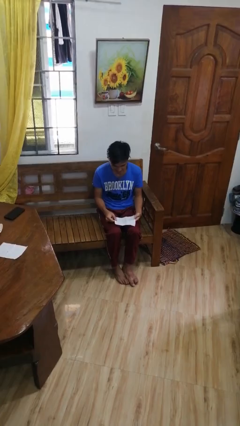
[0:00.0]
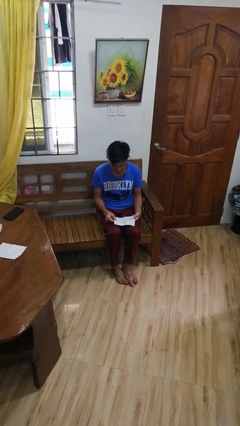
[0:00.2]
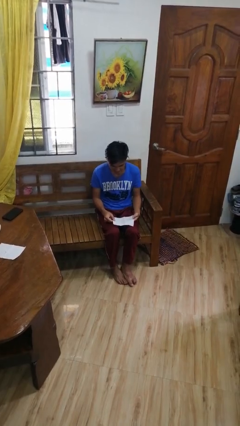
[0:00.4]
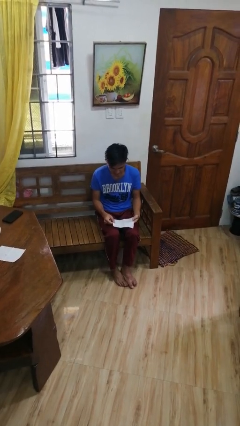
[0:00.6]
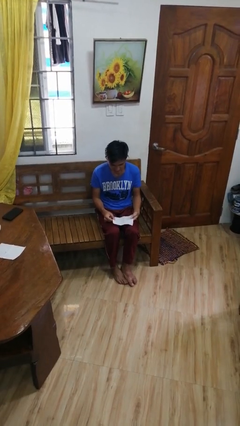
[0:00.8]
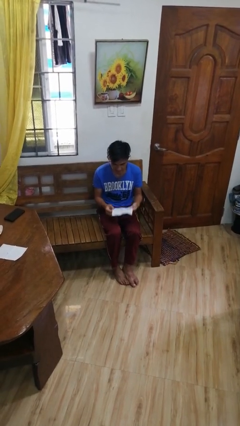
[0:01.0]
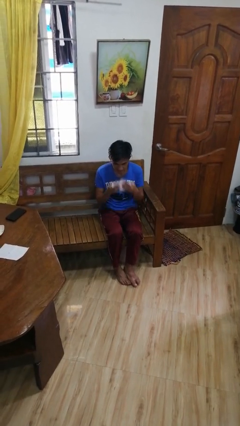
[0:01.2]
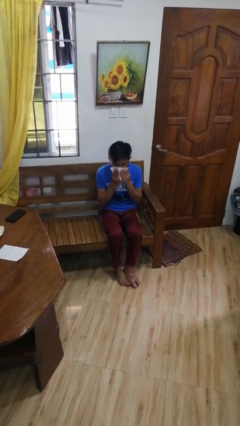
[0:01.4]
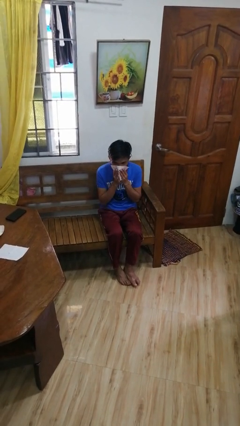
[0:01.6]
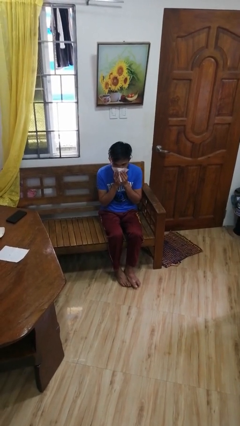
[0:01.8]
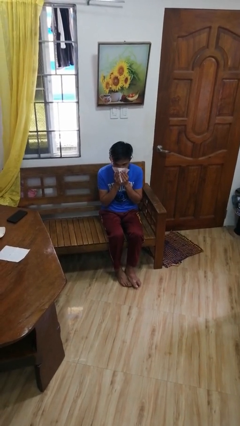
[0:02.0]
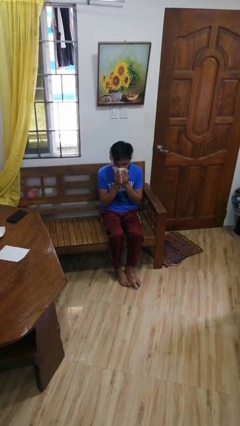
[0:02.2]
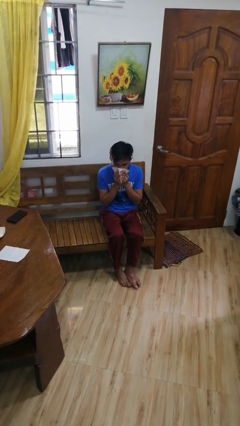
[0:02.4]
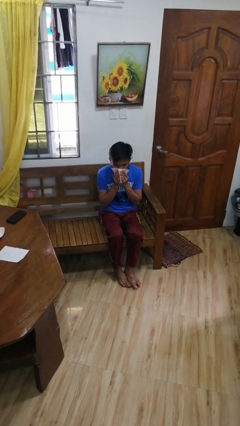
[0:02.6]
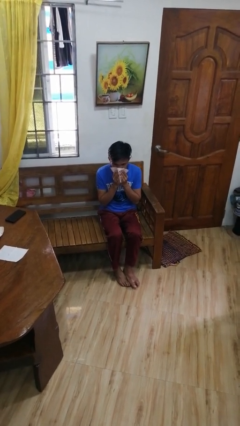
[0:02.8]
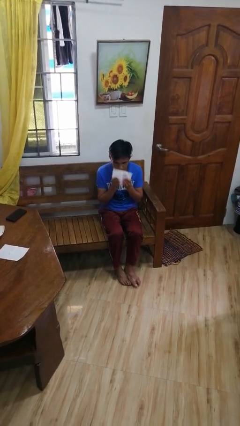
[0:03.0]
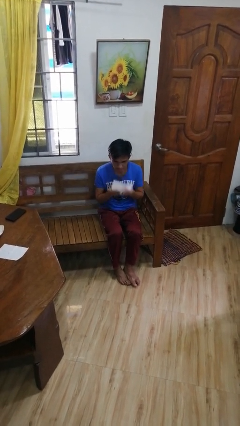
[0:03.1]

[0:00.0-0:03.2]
person wipes mouth with napkin

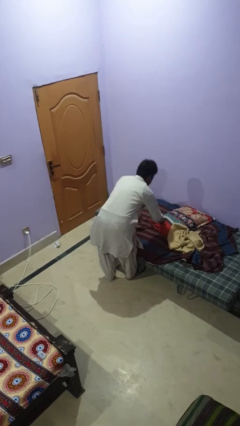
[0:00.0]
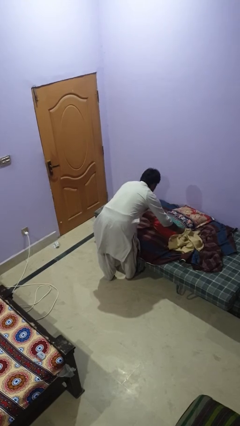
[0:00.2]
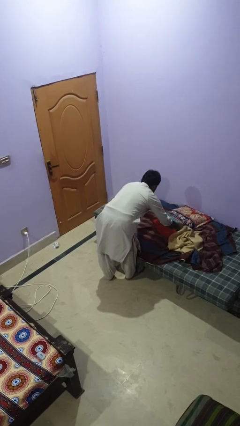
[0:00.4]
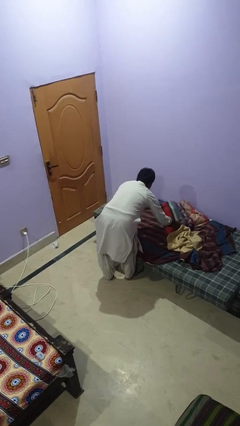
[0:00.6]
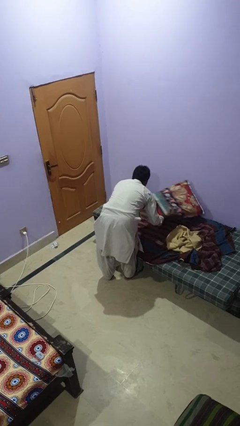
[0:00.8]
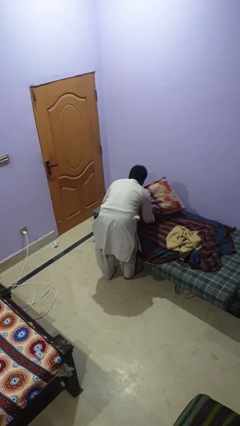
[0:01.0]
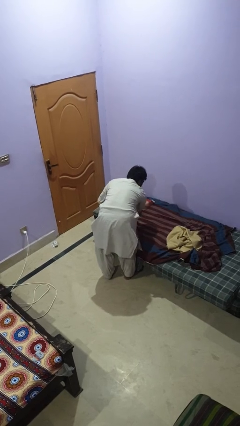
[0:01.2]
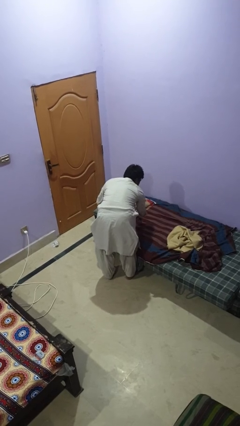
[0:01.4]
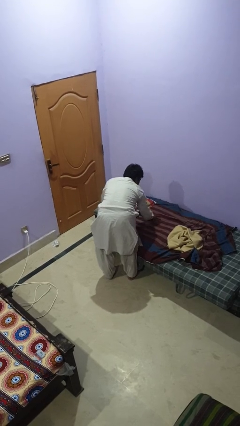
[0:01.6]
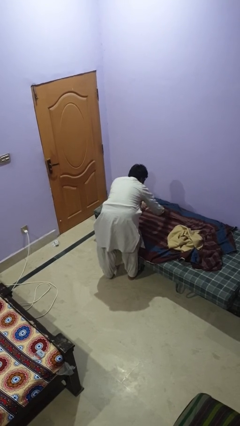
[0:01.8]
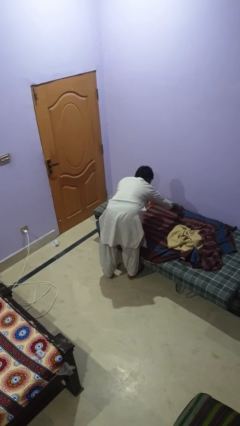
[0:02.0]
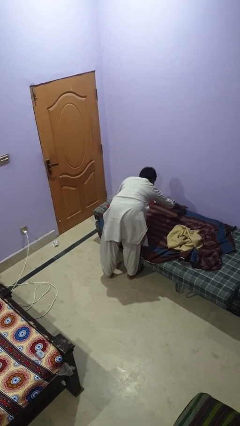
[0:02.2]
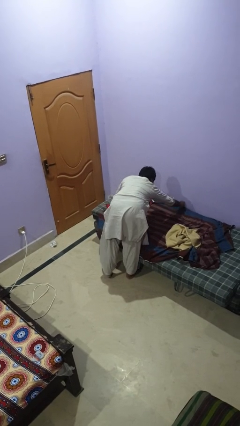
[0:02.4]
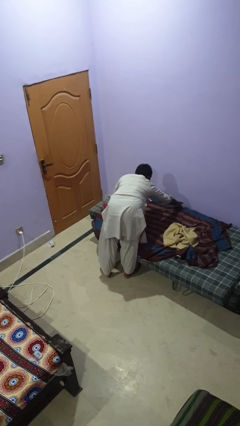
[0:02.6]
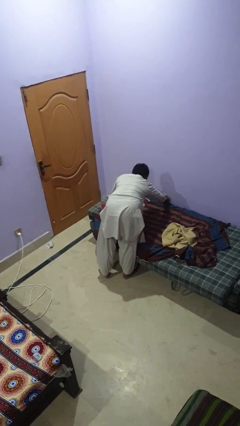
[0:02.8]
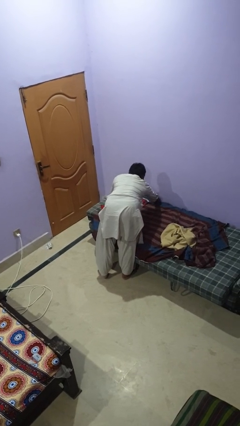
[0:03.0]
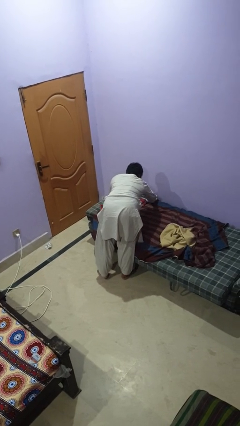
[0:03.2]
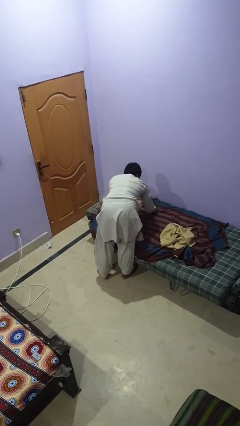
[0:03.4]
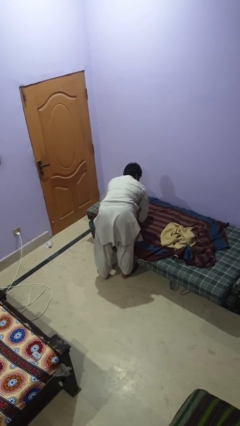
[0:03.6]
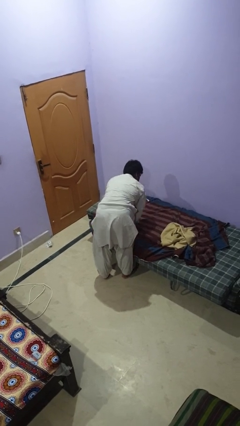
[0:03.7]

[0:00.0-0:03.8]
person makes bed

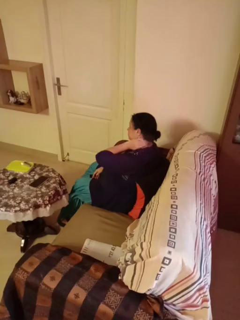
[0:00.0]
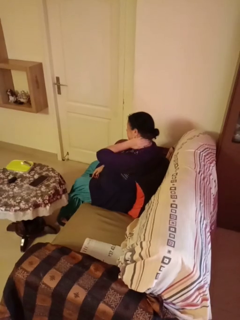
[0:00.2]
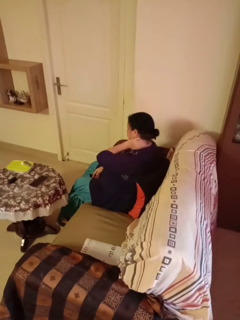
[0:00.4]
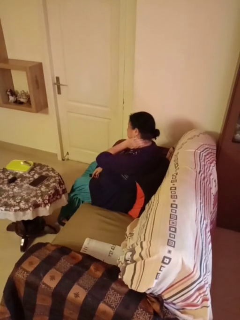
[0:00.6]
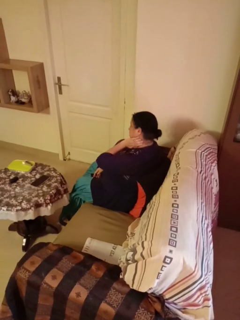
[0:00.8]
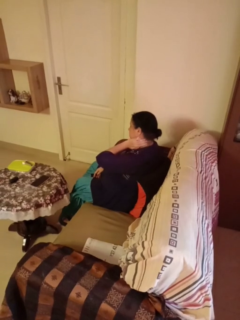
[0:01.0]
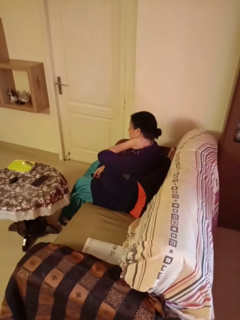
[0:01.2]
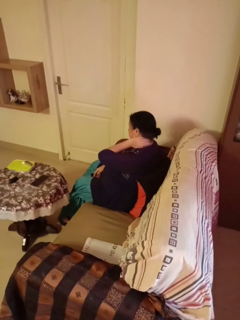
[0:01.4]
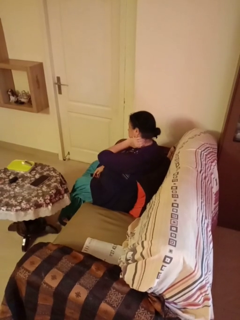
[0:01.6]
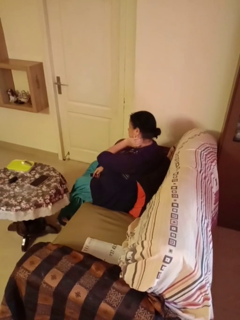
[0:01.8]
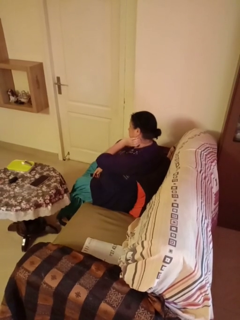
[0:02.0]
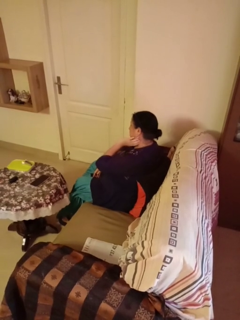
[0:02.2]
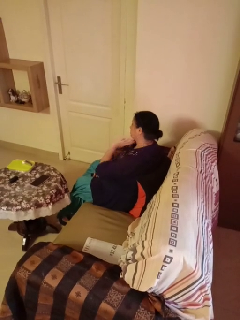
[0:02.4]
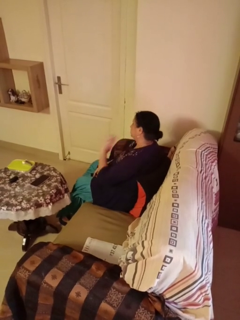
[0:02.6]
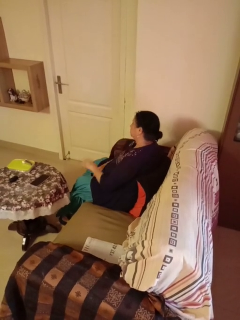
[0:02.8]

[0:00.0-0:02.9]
person rubs neck

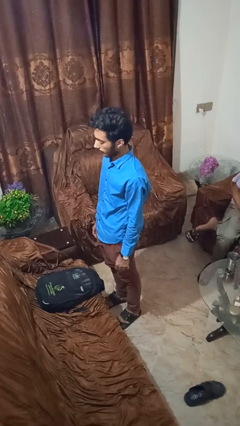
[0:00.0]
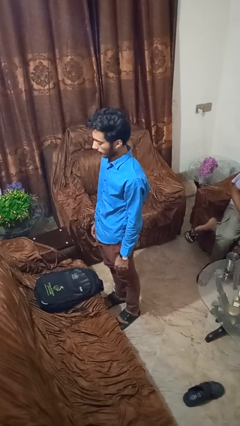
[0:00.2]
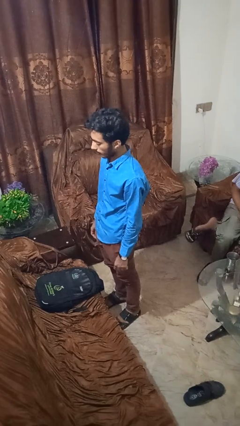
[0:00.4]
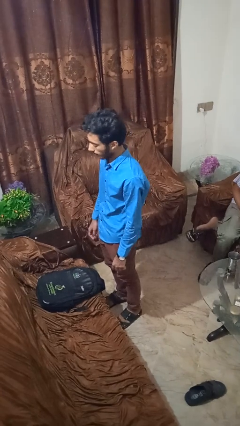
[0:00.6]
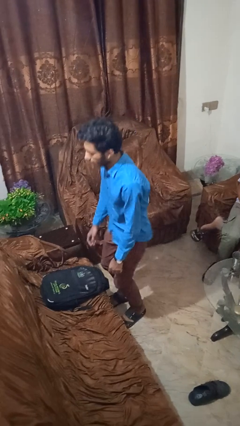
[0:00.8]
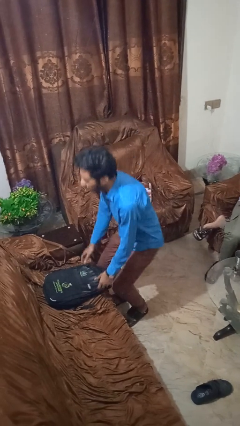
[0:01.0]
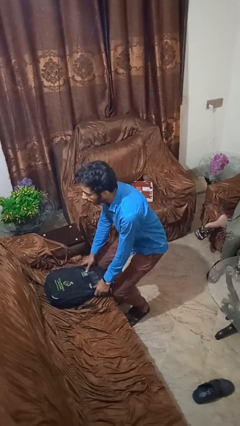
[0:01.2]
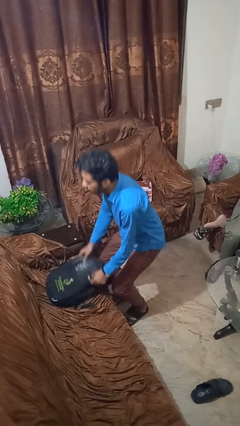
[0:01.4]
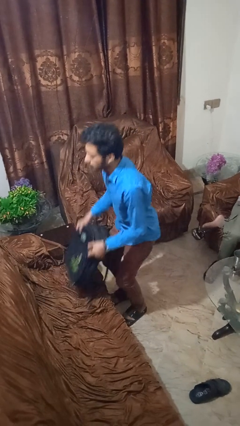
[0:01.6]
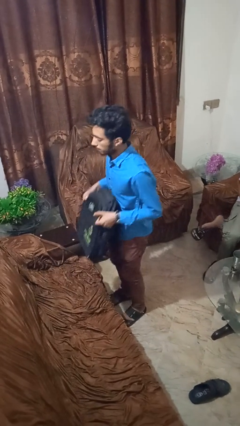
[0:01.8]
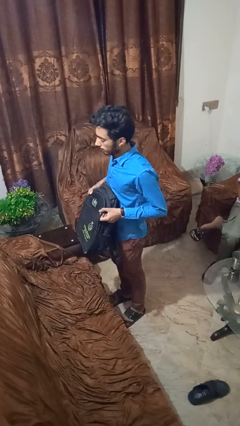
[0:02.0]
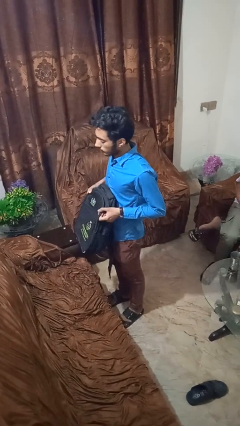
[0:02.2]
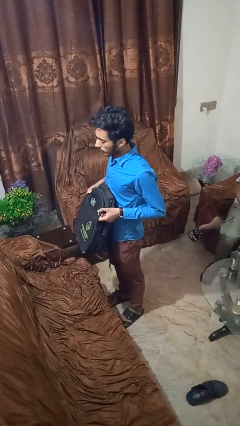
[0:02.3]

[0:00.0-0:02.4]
person picks up object from couch

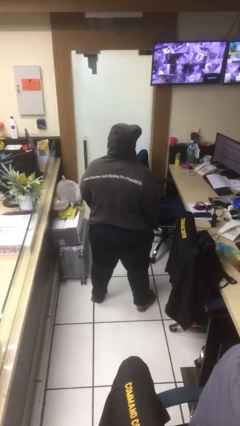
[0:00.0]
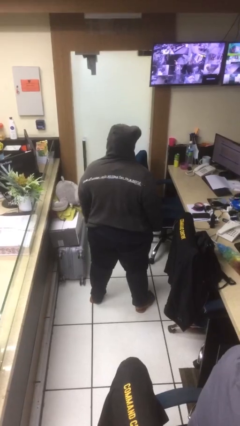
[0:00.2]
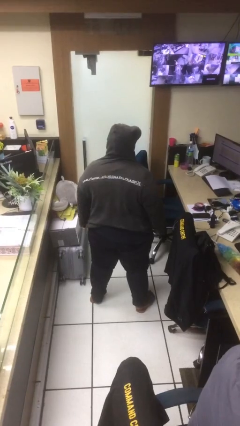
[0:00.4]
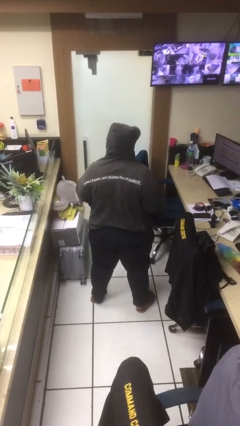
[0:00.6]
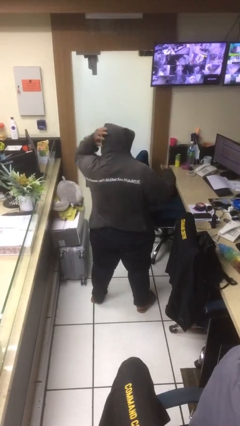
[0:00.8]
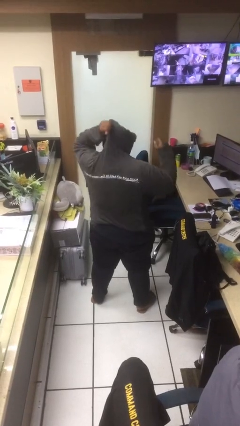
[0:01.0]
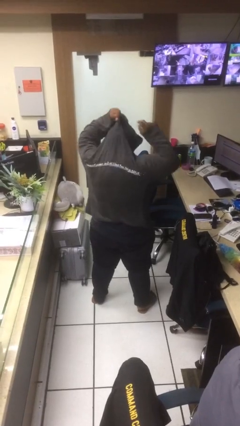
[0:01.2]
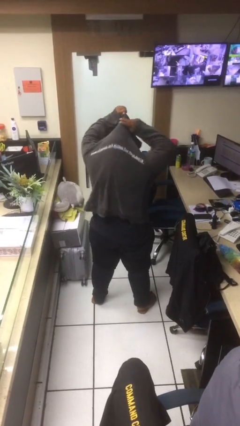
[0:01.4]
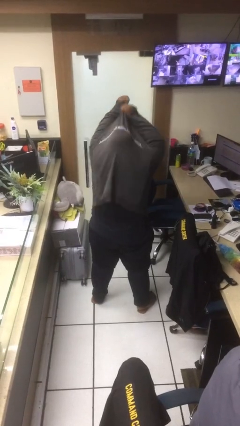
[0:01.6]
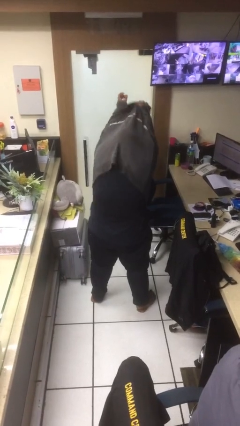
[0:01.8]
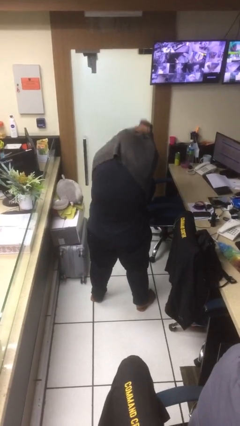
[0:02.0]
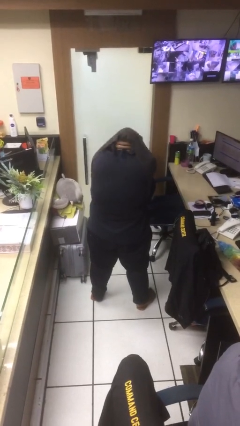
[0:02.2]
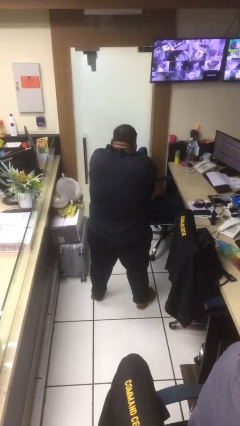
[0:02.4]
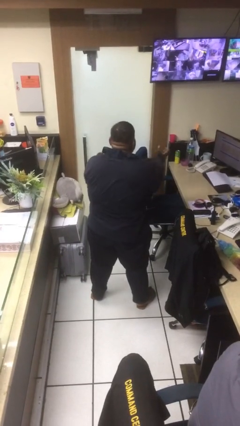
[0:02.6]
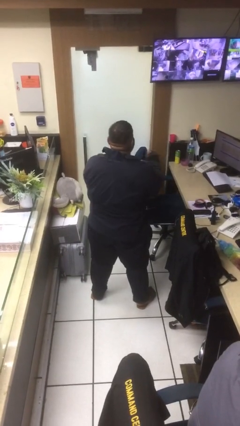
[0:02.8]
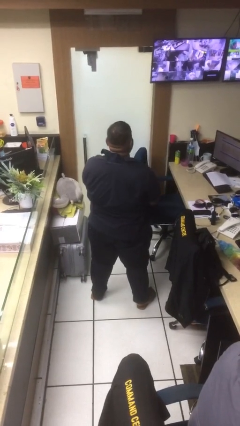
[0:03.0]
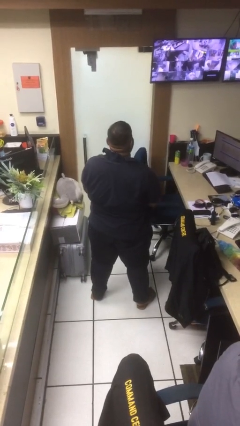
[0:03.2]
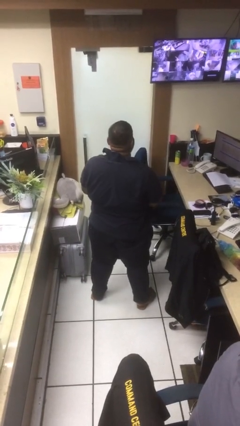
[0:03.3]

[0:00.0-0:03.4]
person takes off hoodie

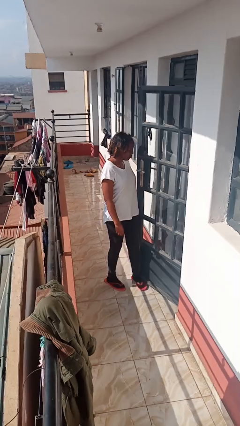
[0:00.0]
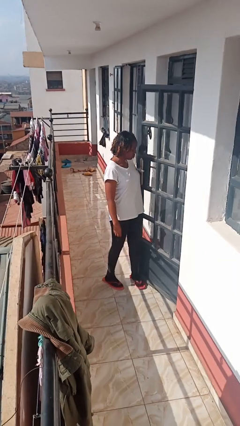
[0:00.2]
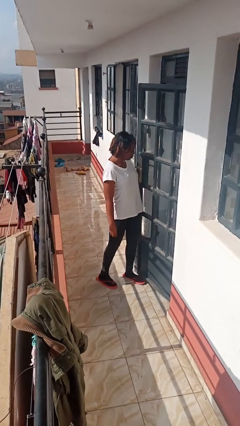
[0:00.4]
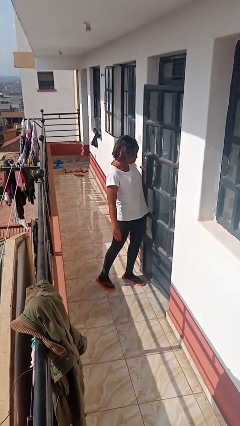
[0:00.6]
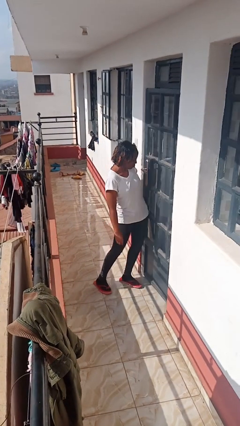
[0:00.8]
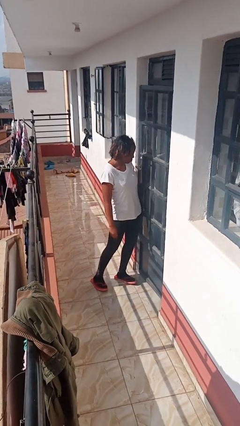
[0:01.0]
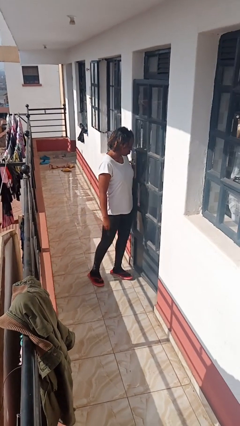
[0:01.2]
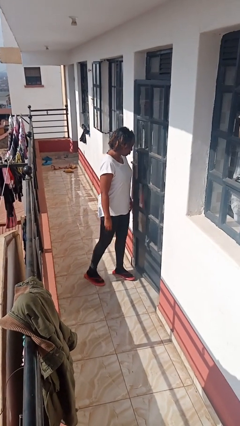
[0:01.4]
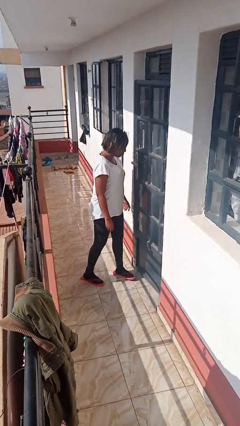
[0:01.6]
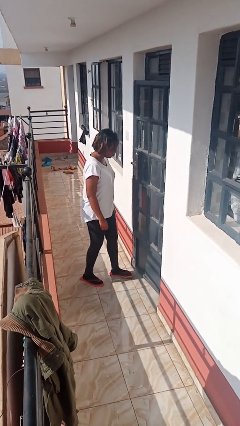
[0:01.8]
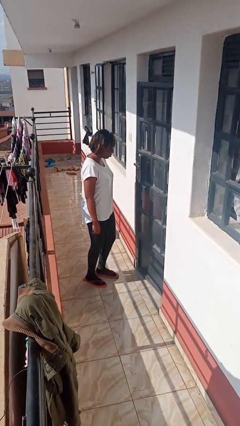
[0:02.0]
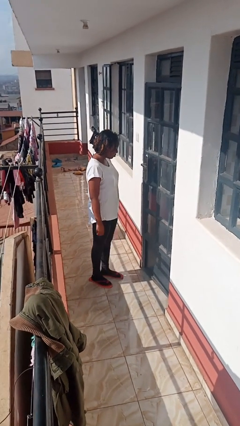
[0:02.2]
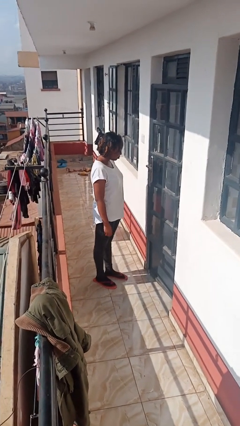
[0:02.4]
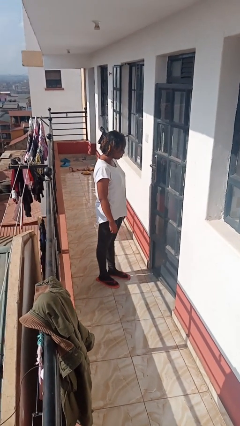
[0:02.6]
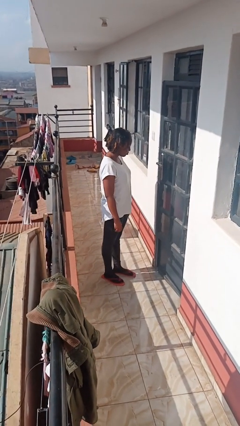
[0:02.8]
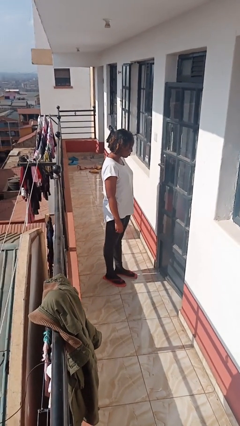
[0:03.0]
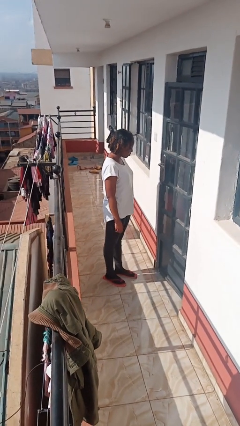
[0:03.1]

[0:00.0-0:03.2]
person closes door with hip
